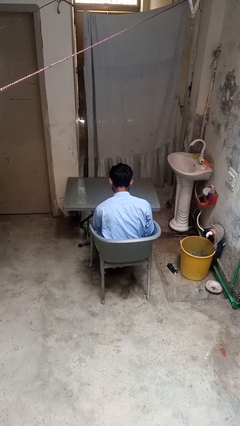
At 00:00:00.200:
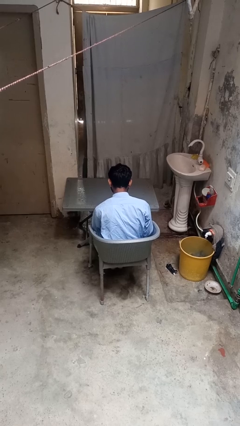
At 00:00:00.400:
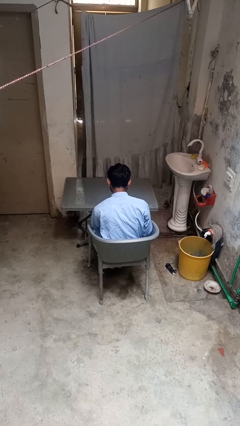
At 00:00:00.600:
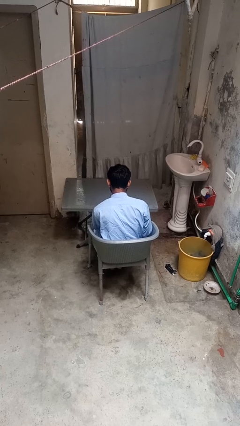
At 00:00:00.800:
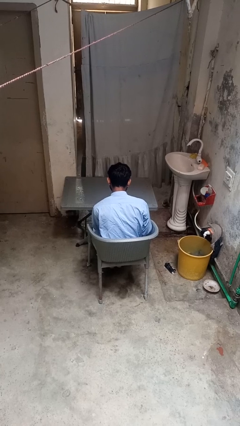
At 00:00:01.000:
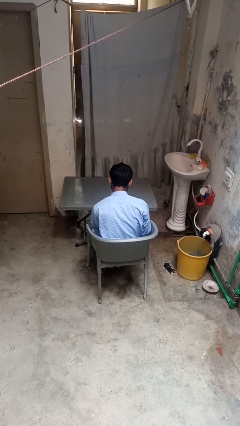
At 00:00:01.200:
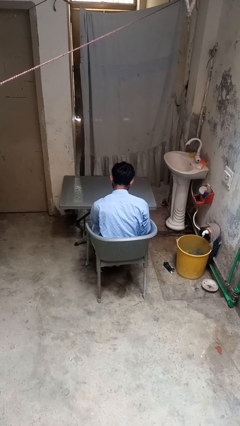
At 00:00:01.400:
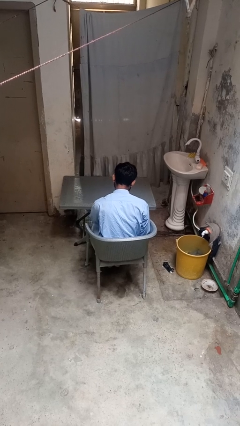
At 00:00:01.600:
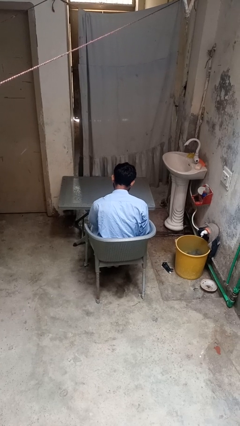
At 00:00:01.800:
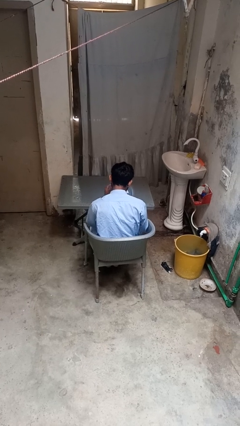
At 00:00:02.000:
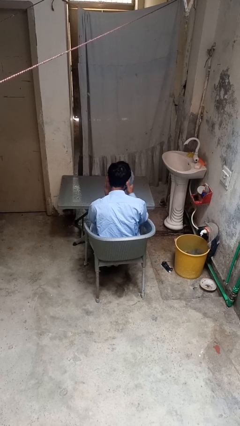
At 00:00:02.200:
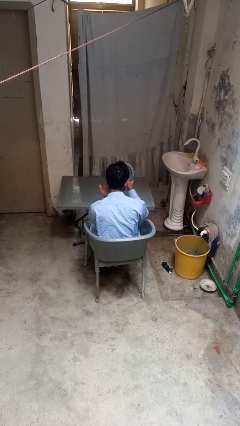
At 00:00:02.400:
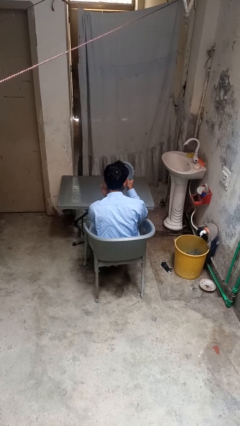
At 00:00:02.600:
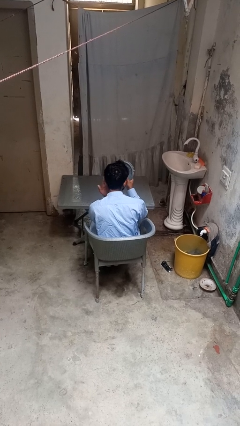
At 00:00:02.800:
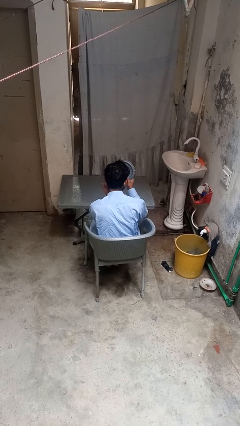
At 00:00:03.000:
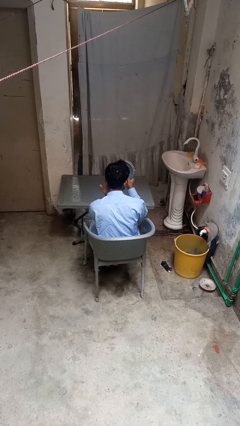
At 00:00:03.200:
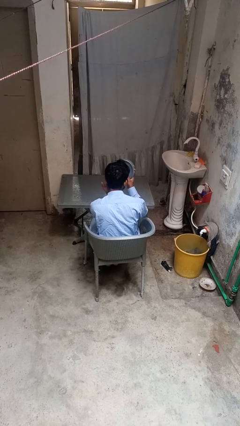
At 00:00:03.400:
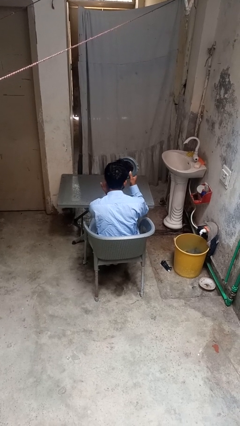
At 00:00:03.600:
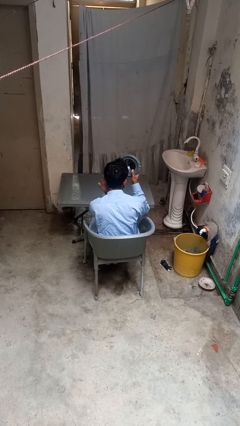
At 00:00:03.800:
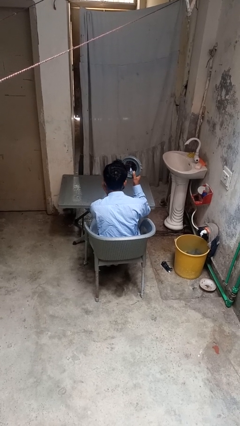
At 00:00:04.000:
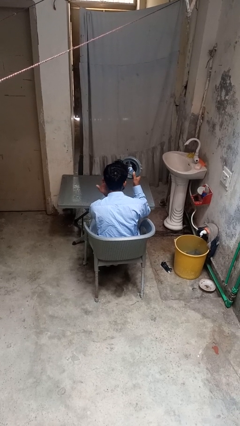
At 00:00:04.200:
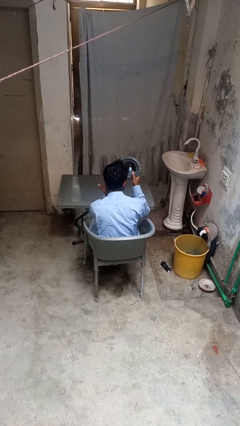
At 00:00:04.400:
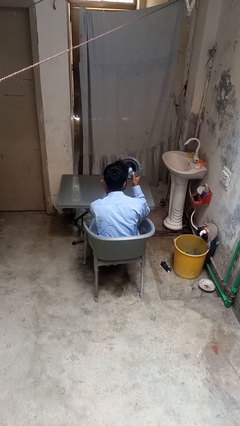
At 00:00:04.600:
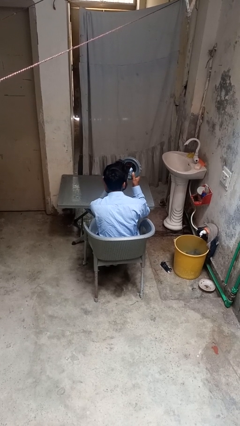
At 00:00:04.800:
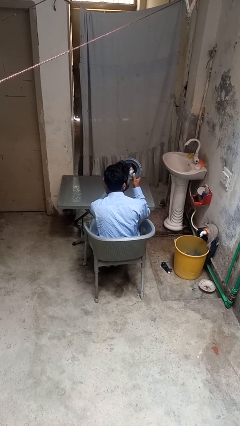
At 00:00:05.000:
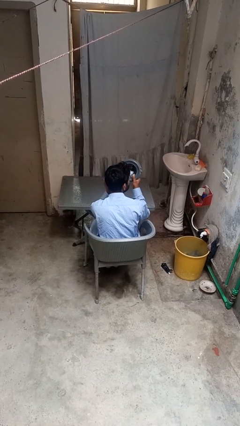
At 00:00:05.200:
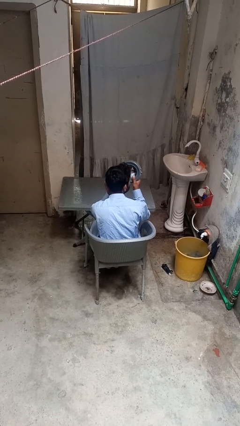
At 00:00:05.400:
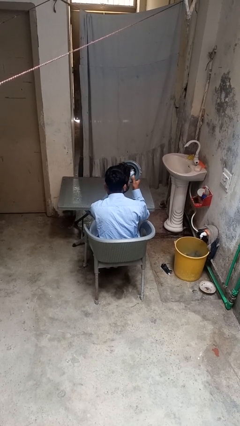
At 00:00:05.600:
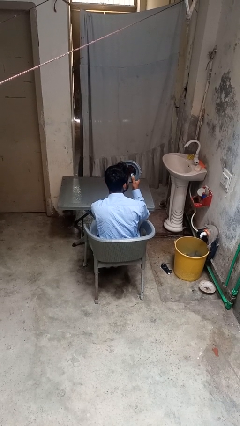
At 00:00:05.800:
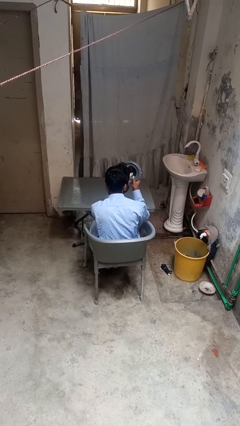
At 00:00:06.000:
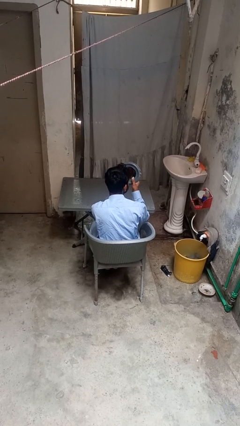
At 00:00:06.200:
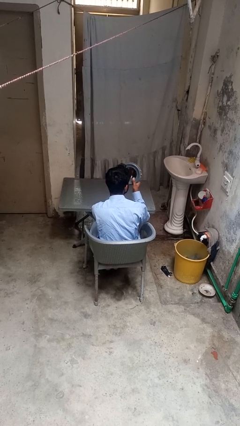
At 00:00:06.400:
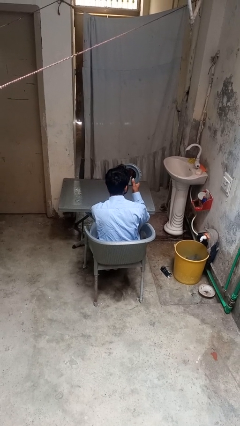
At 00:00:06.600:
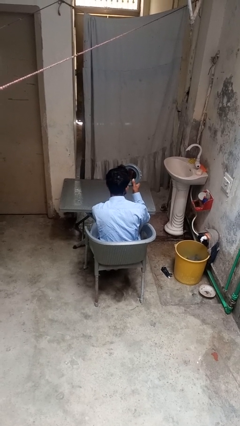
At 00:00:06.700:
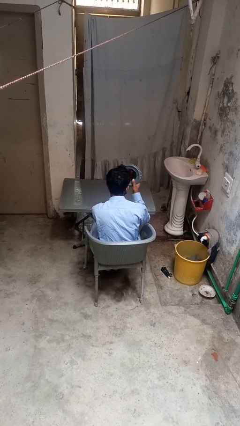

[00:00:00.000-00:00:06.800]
person applies foundation makeup

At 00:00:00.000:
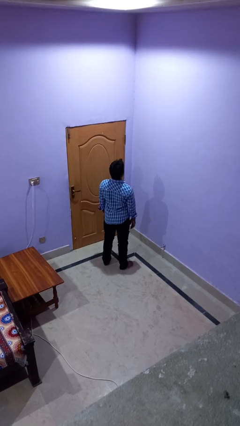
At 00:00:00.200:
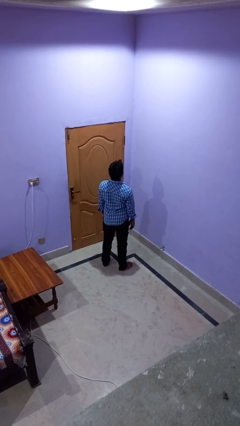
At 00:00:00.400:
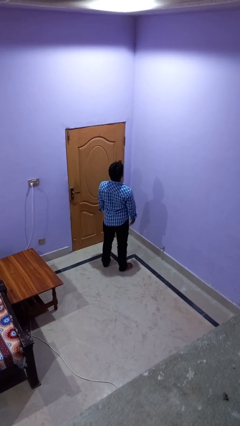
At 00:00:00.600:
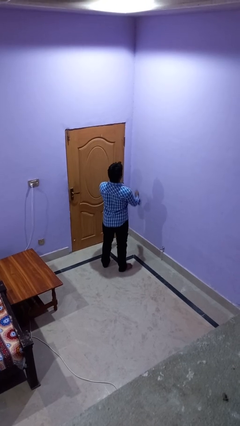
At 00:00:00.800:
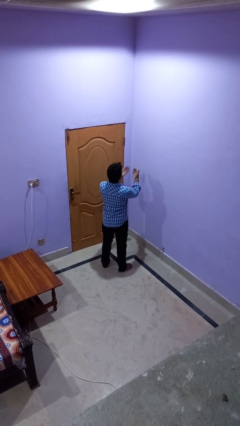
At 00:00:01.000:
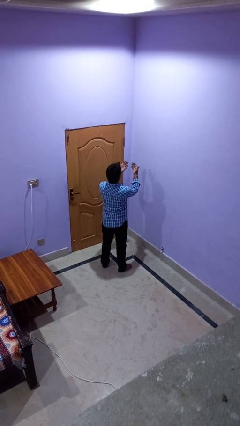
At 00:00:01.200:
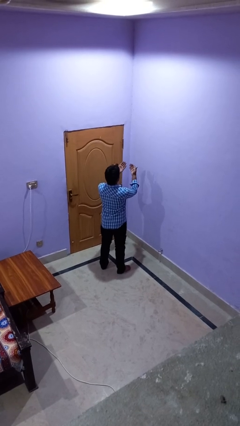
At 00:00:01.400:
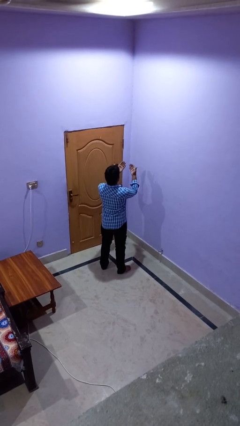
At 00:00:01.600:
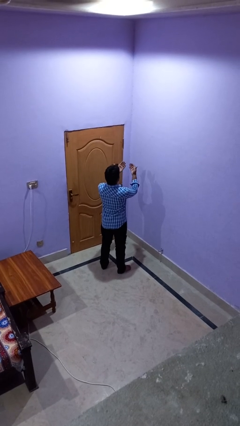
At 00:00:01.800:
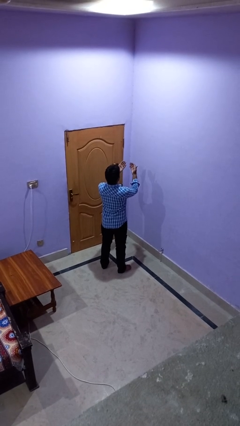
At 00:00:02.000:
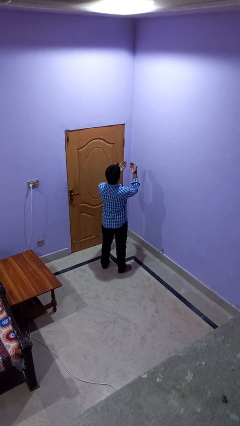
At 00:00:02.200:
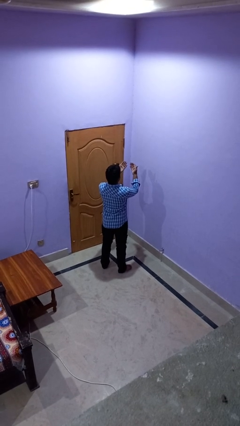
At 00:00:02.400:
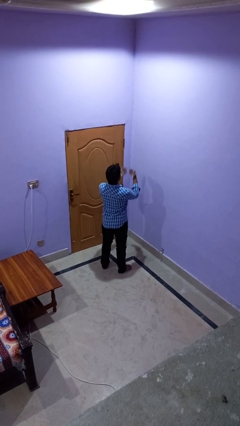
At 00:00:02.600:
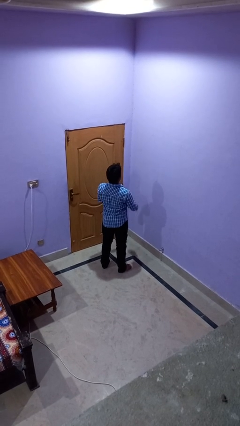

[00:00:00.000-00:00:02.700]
person prays

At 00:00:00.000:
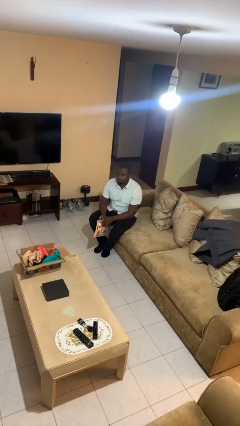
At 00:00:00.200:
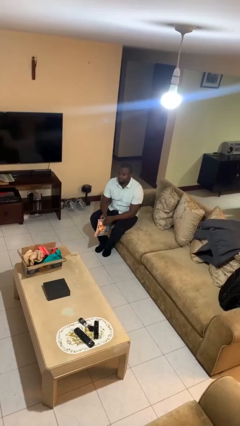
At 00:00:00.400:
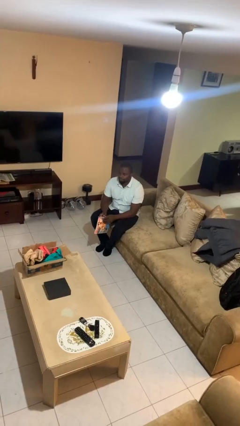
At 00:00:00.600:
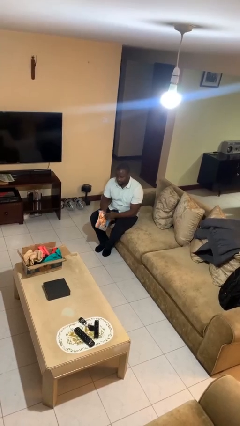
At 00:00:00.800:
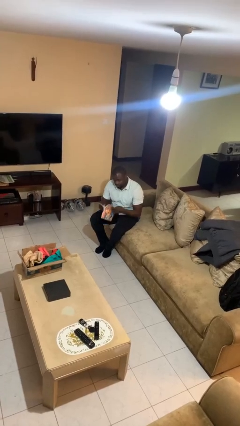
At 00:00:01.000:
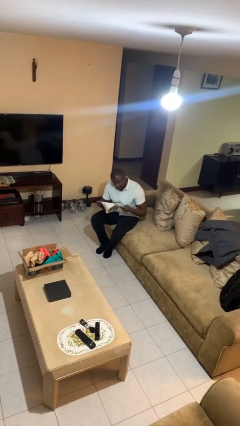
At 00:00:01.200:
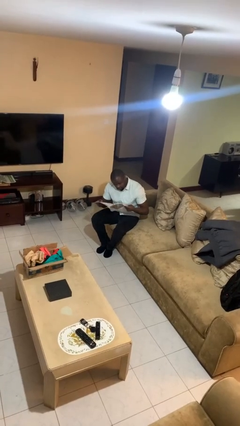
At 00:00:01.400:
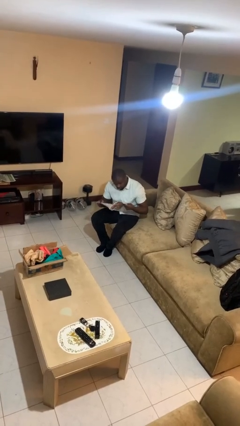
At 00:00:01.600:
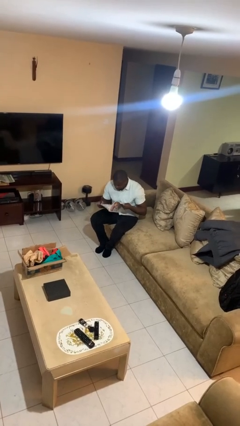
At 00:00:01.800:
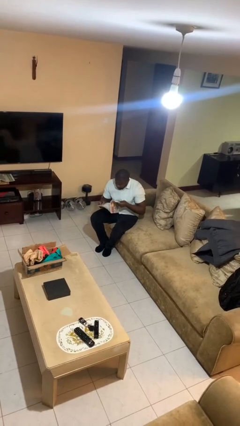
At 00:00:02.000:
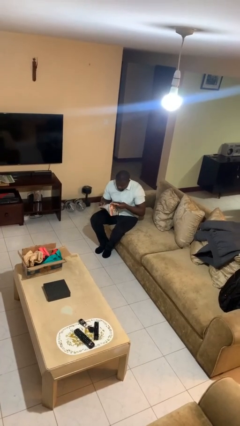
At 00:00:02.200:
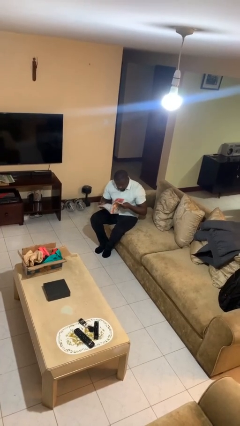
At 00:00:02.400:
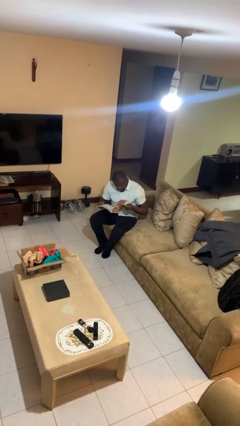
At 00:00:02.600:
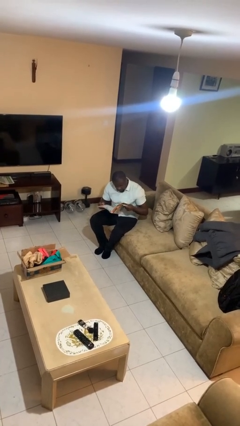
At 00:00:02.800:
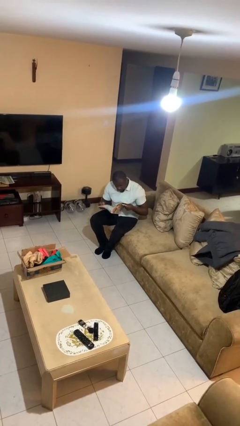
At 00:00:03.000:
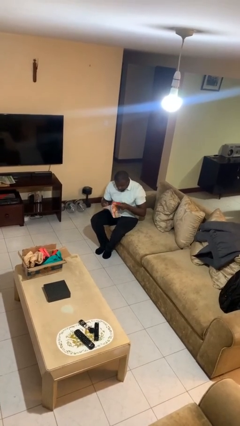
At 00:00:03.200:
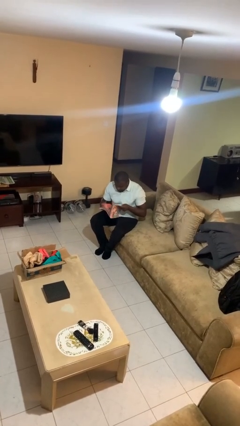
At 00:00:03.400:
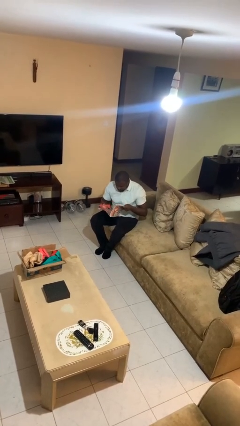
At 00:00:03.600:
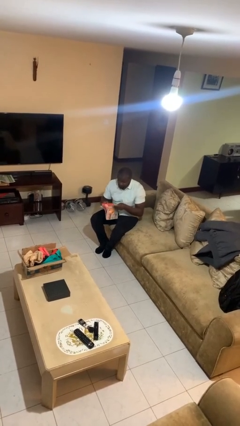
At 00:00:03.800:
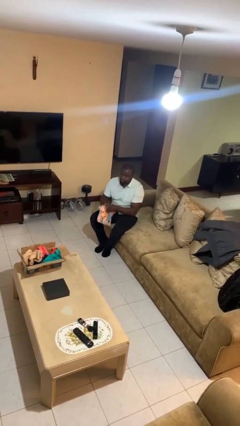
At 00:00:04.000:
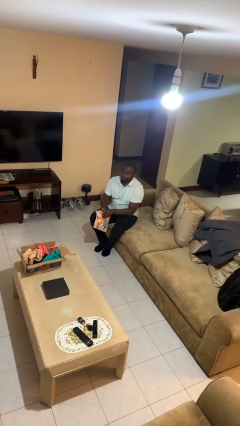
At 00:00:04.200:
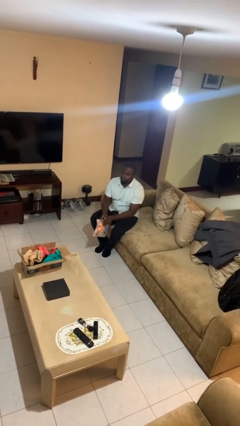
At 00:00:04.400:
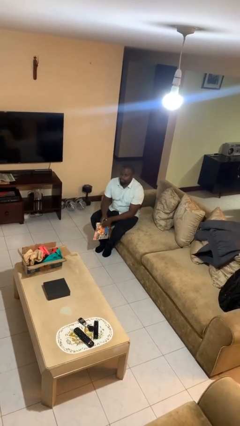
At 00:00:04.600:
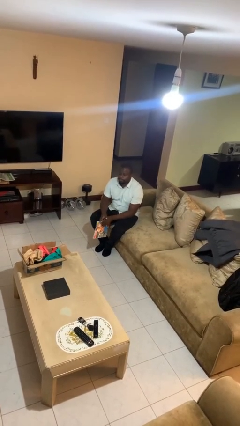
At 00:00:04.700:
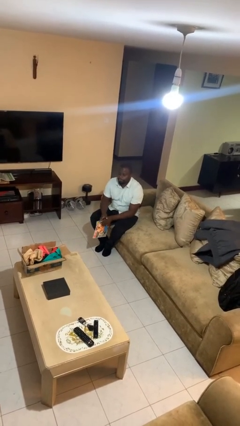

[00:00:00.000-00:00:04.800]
person reads magazine

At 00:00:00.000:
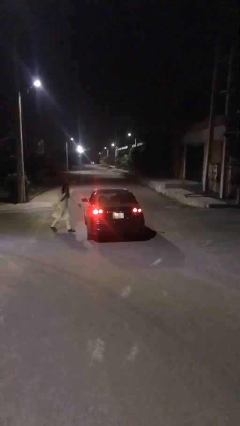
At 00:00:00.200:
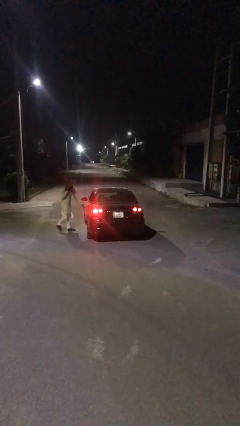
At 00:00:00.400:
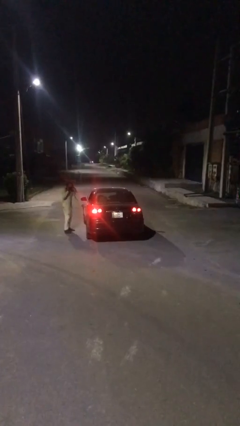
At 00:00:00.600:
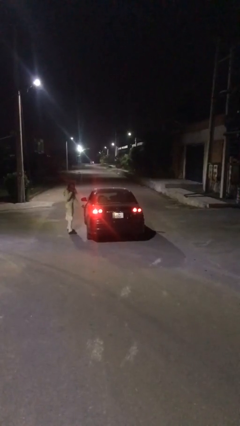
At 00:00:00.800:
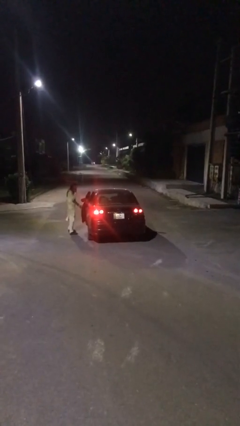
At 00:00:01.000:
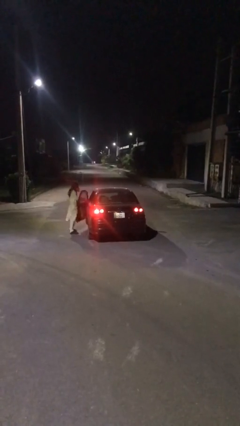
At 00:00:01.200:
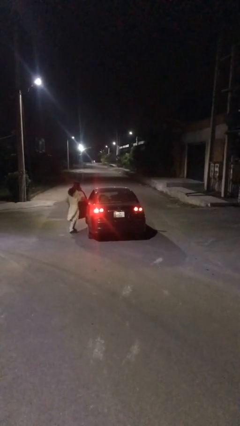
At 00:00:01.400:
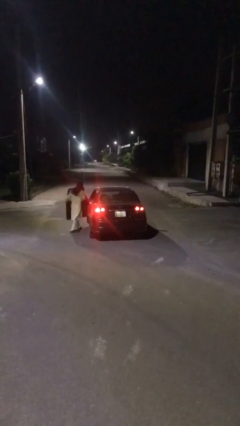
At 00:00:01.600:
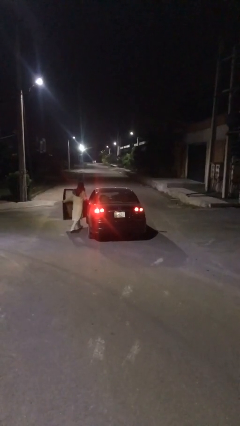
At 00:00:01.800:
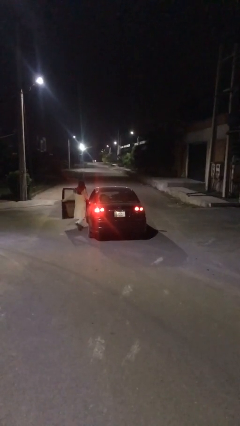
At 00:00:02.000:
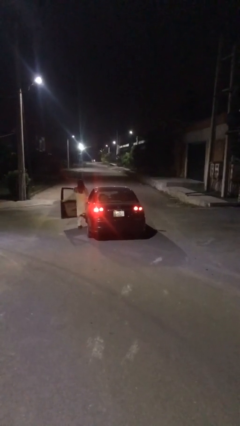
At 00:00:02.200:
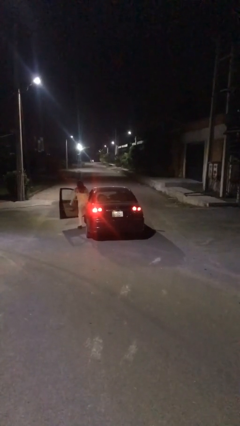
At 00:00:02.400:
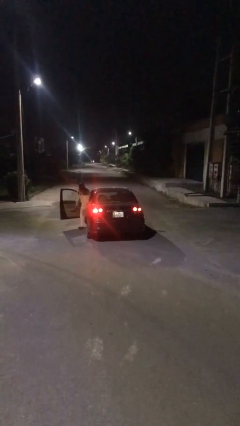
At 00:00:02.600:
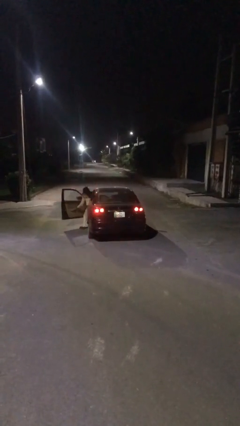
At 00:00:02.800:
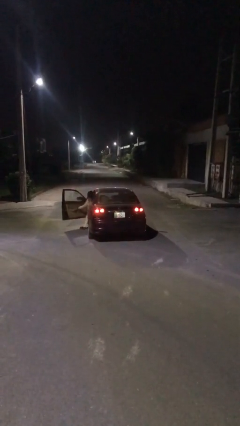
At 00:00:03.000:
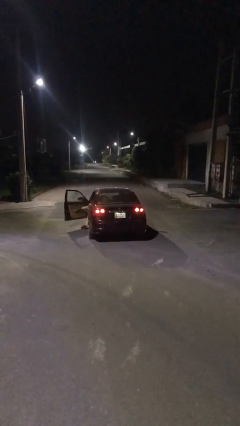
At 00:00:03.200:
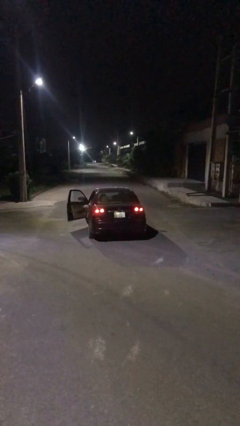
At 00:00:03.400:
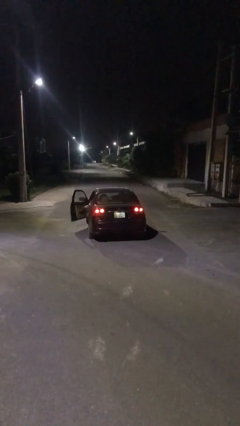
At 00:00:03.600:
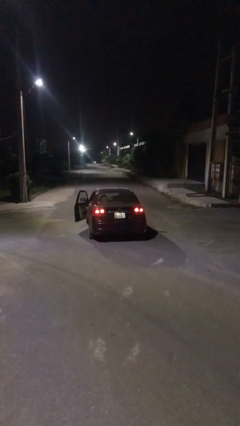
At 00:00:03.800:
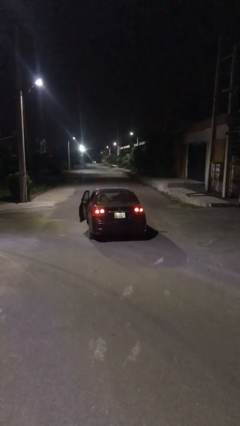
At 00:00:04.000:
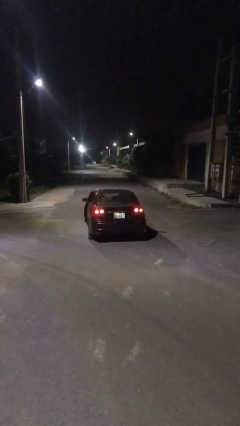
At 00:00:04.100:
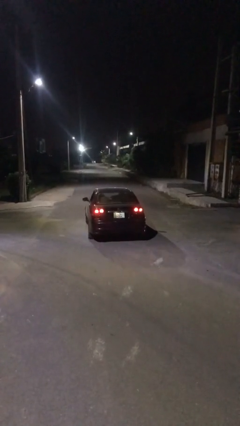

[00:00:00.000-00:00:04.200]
car picks up person
